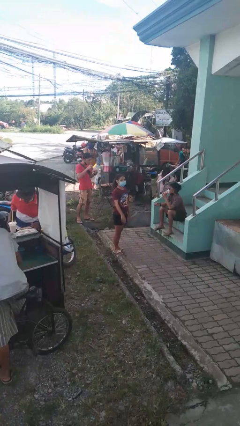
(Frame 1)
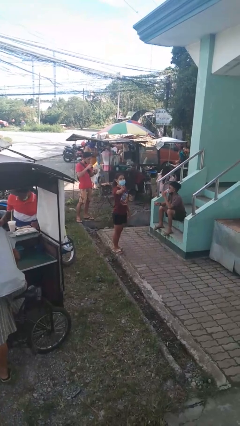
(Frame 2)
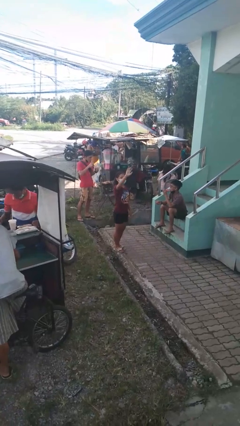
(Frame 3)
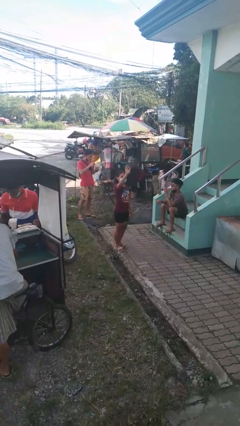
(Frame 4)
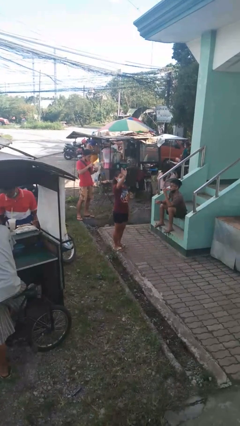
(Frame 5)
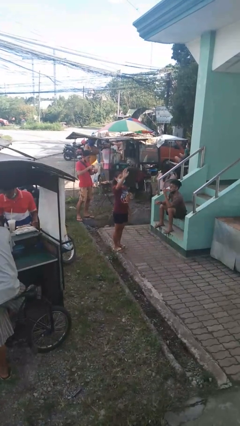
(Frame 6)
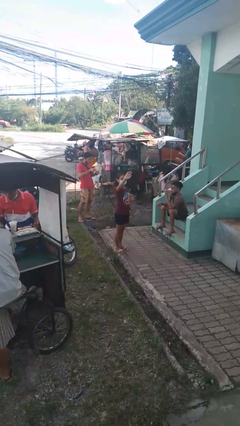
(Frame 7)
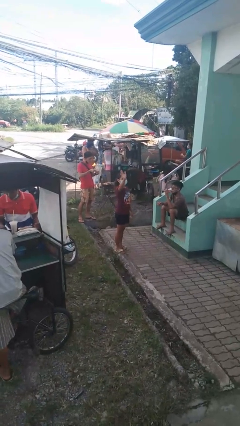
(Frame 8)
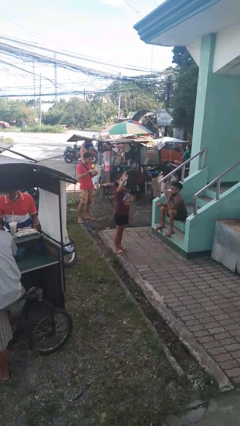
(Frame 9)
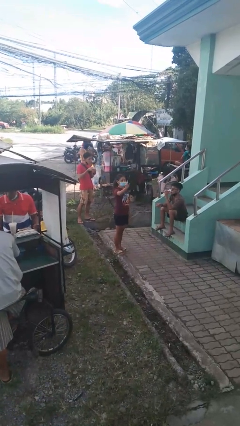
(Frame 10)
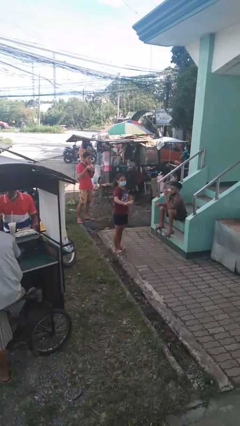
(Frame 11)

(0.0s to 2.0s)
person waves at person

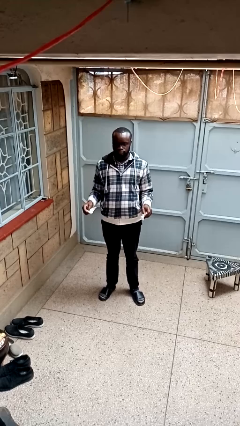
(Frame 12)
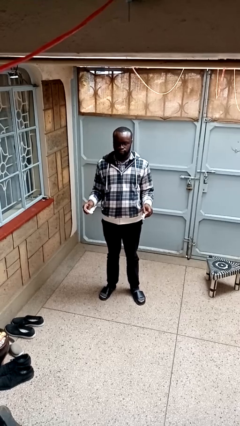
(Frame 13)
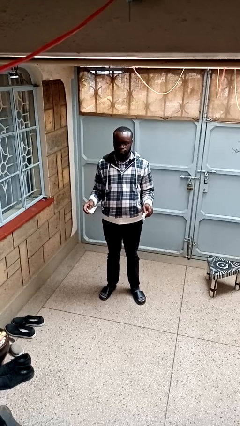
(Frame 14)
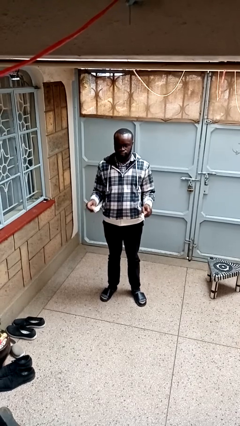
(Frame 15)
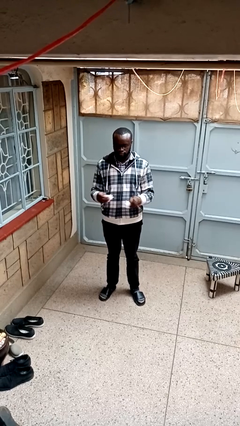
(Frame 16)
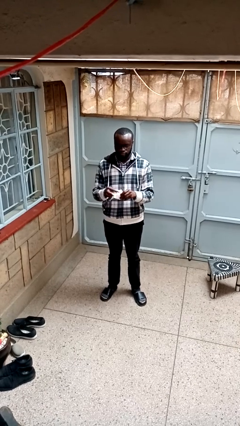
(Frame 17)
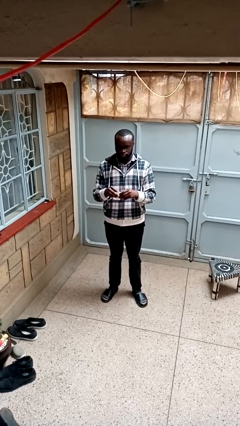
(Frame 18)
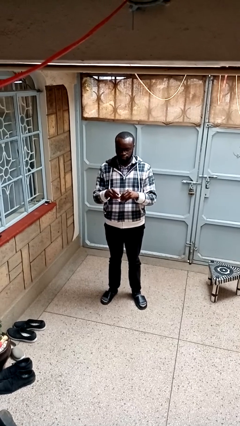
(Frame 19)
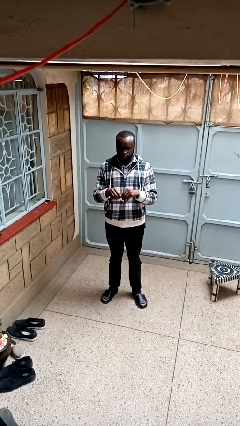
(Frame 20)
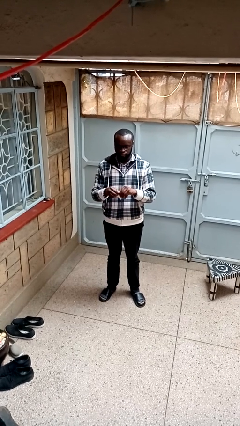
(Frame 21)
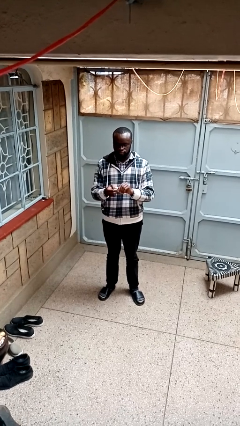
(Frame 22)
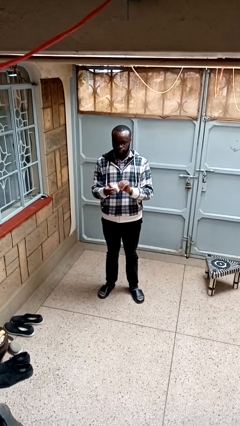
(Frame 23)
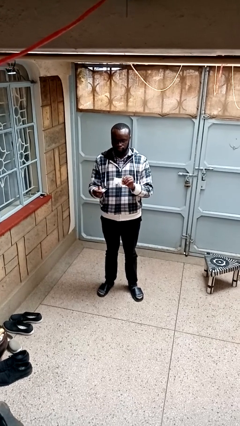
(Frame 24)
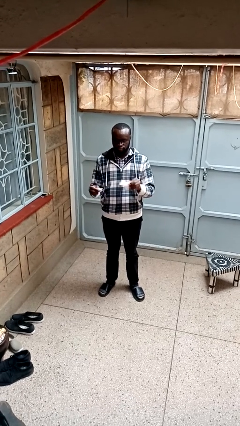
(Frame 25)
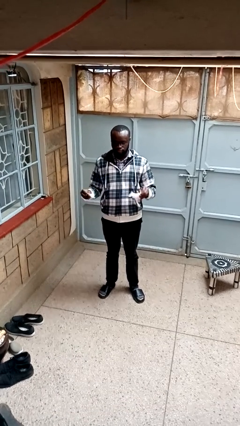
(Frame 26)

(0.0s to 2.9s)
person tears paper

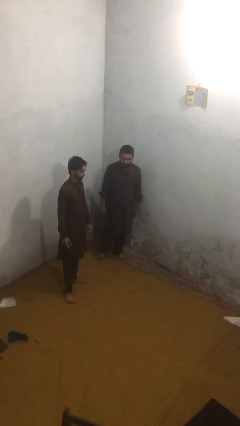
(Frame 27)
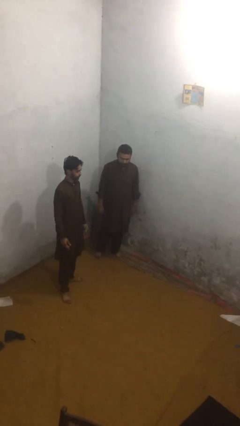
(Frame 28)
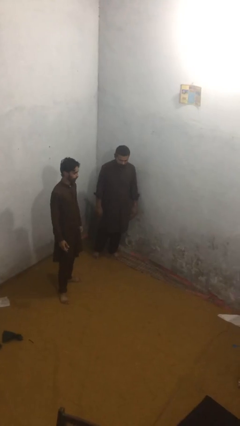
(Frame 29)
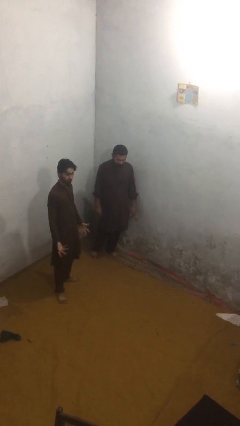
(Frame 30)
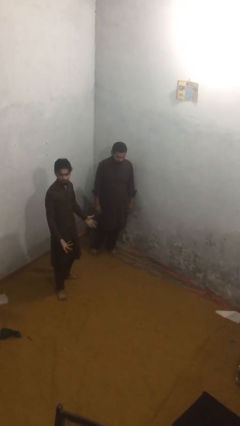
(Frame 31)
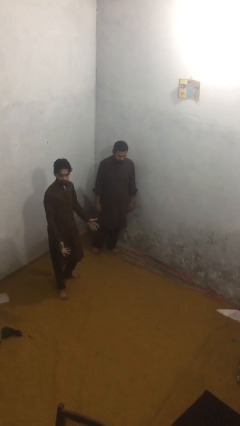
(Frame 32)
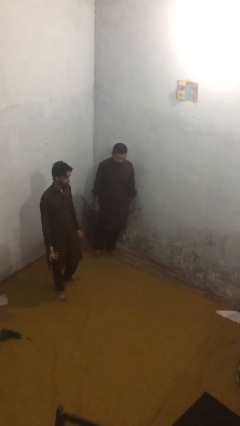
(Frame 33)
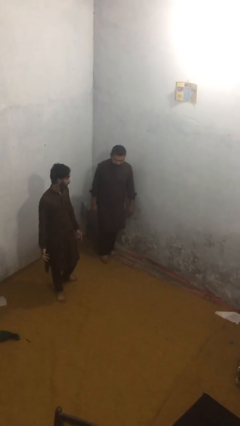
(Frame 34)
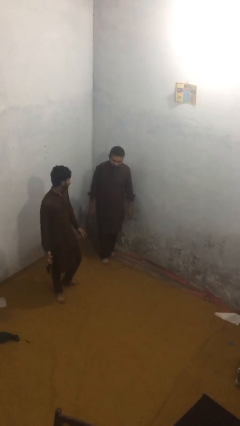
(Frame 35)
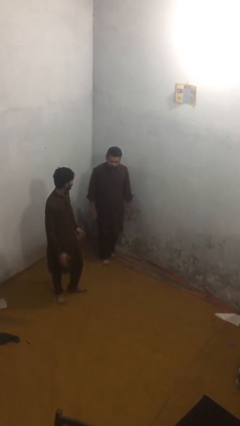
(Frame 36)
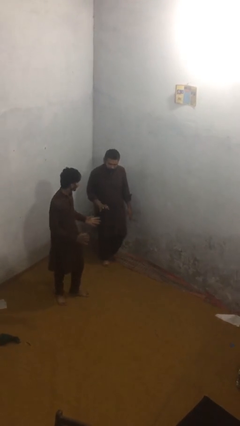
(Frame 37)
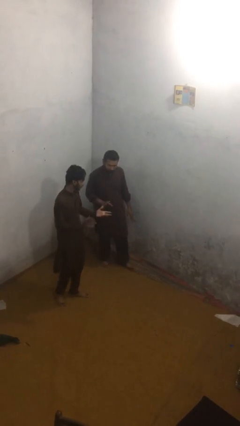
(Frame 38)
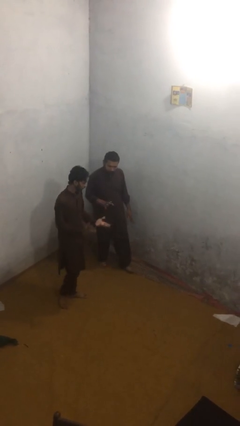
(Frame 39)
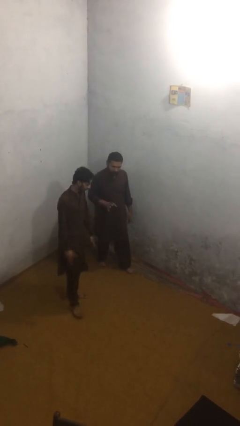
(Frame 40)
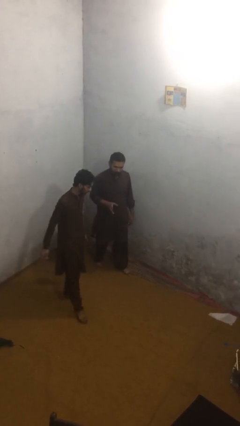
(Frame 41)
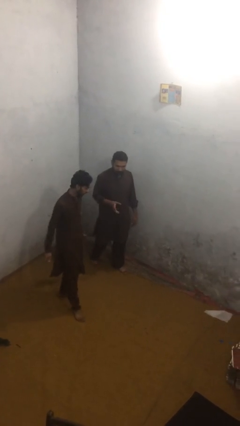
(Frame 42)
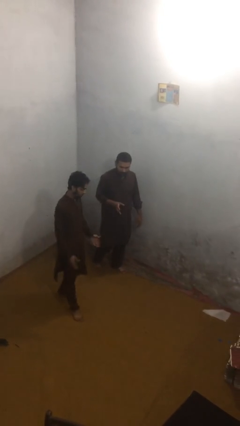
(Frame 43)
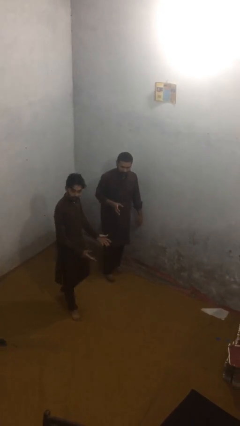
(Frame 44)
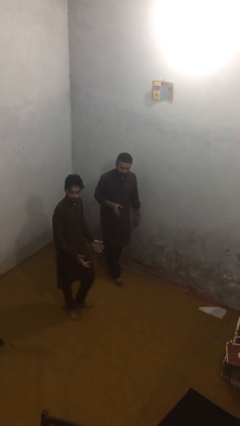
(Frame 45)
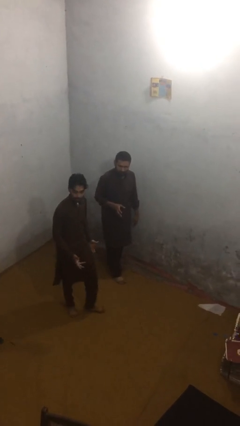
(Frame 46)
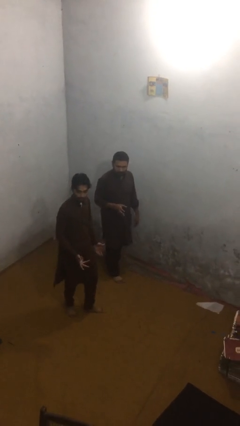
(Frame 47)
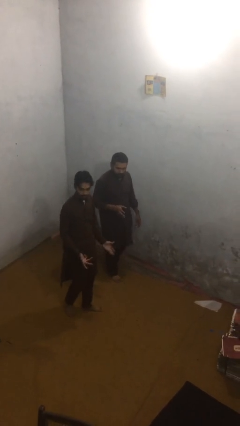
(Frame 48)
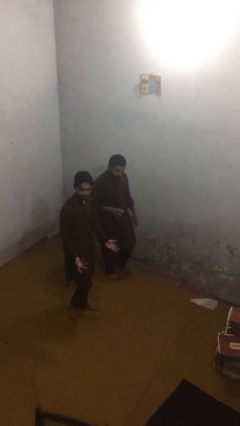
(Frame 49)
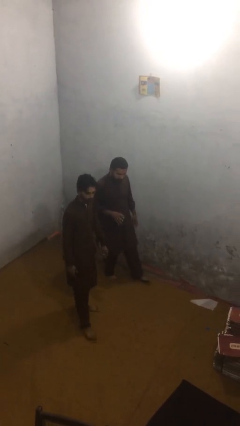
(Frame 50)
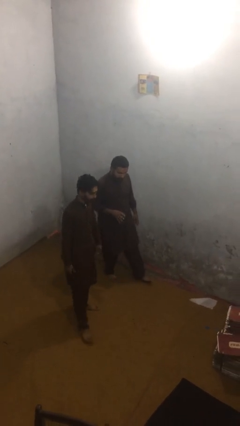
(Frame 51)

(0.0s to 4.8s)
person talks to person

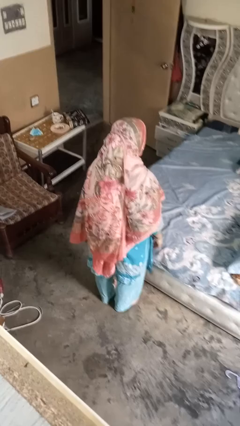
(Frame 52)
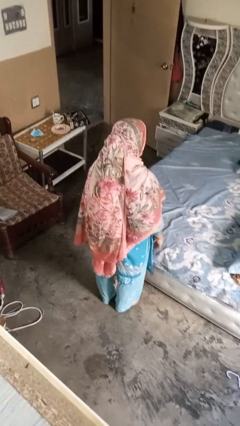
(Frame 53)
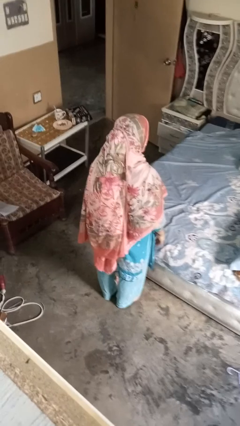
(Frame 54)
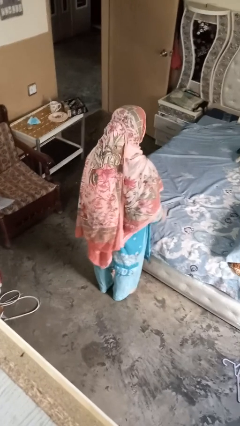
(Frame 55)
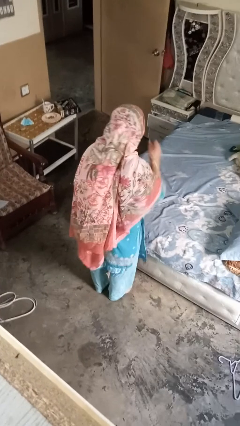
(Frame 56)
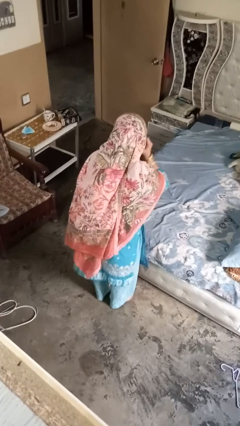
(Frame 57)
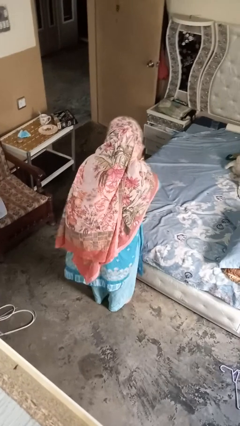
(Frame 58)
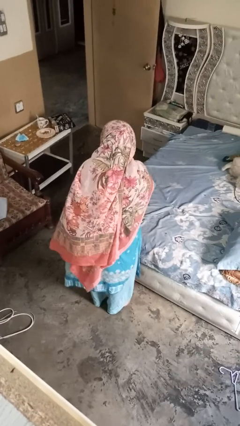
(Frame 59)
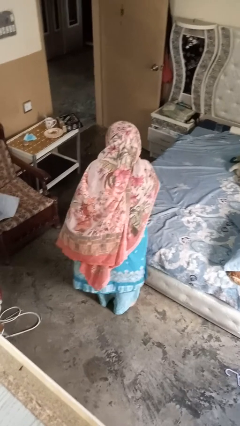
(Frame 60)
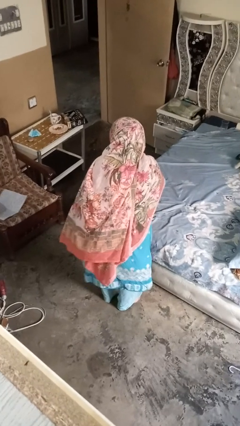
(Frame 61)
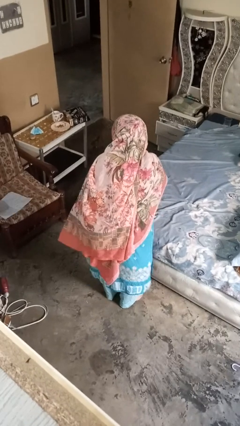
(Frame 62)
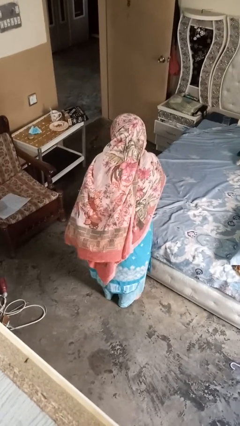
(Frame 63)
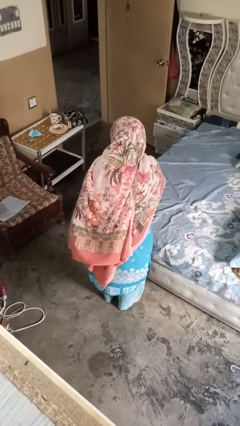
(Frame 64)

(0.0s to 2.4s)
person gestures listen closely

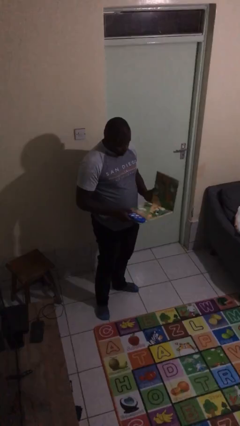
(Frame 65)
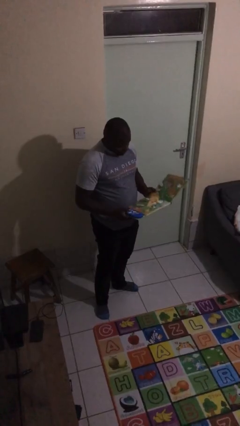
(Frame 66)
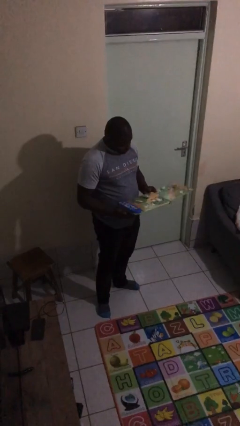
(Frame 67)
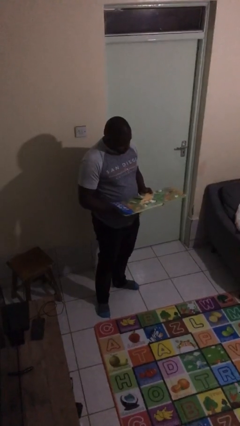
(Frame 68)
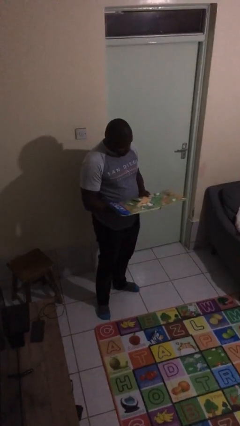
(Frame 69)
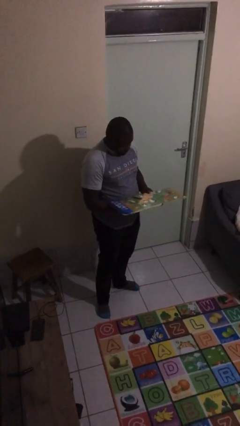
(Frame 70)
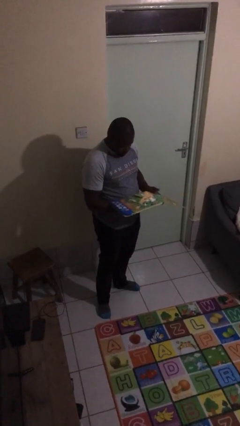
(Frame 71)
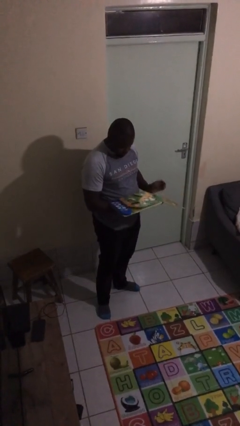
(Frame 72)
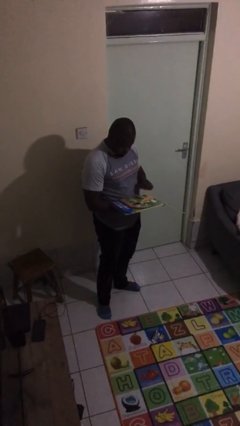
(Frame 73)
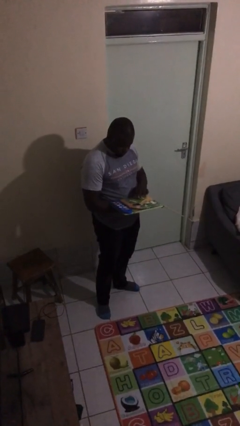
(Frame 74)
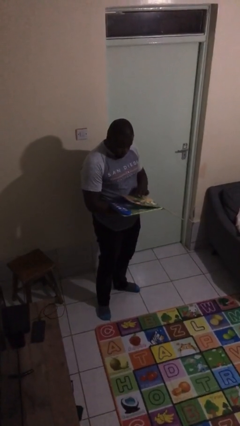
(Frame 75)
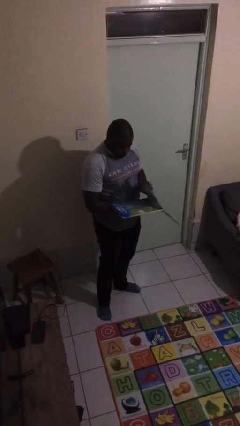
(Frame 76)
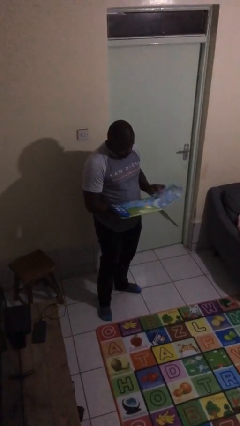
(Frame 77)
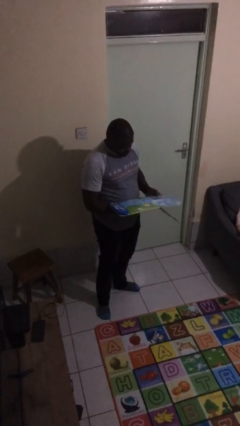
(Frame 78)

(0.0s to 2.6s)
person reads book

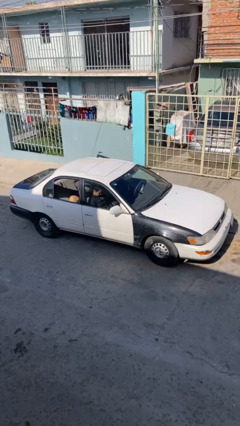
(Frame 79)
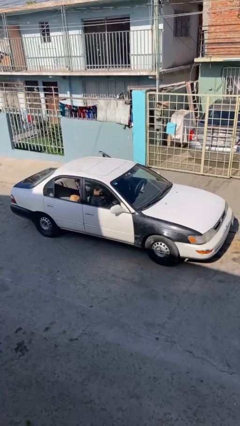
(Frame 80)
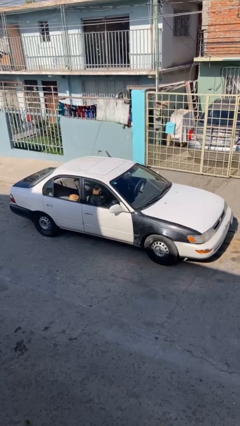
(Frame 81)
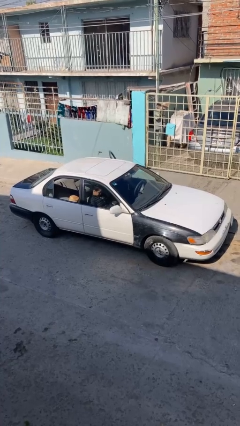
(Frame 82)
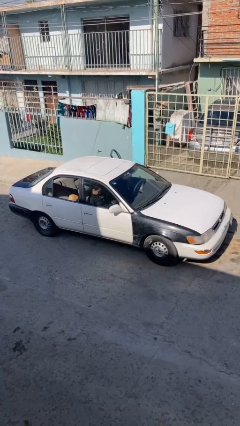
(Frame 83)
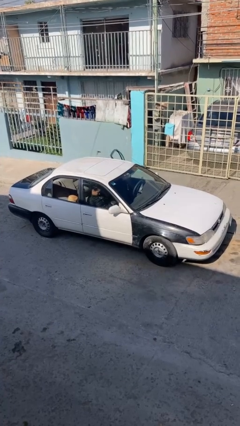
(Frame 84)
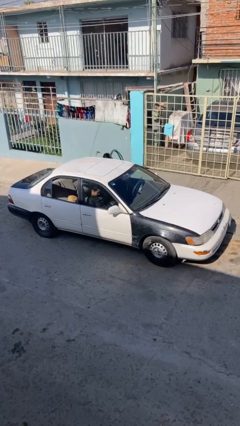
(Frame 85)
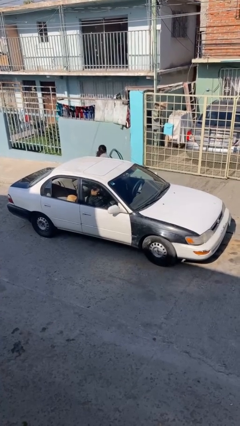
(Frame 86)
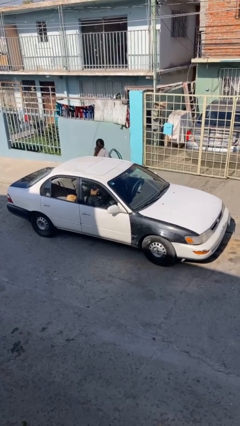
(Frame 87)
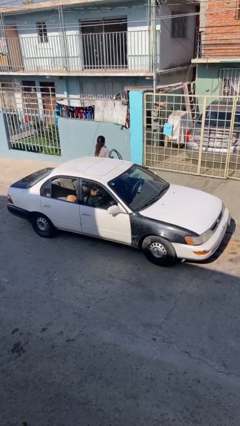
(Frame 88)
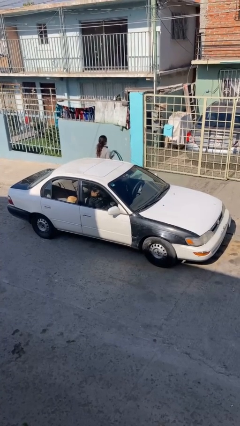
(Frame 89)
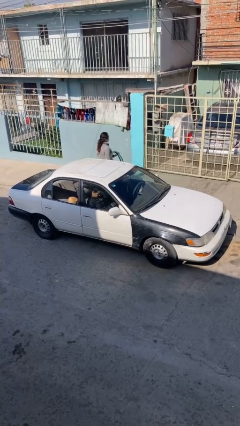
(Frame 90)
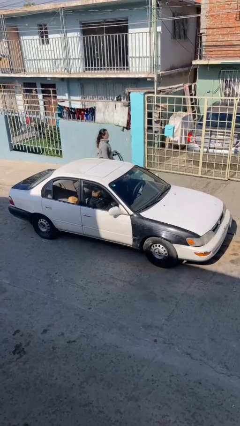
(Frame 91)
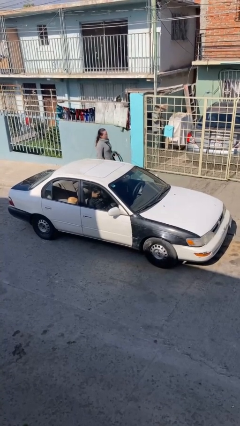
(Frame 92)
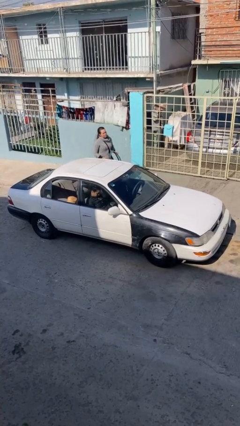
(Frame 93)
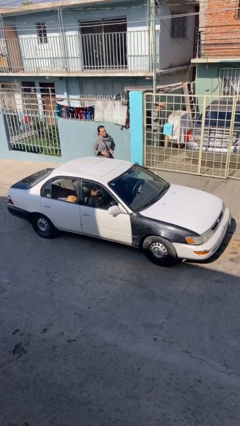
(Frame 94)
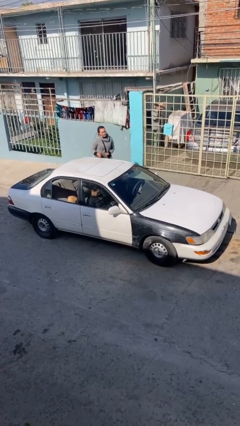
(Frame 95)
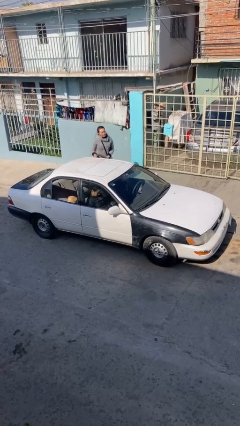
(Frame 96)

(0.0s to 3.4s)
car drops off person
